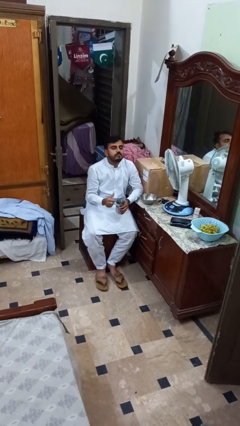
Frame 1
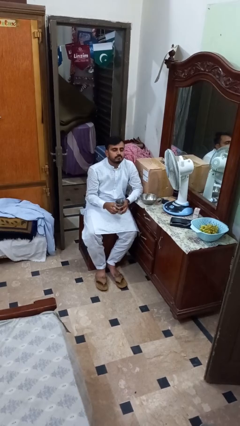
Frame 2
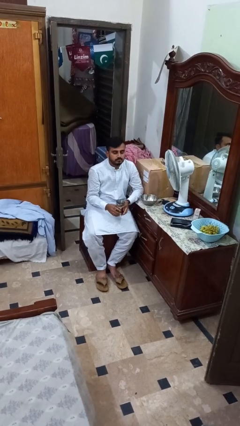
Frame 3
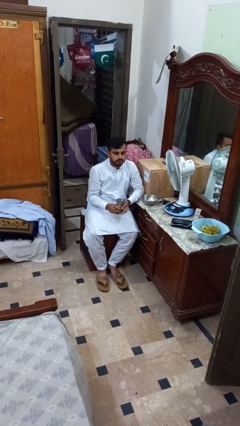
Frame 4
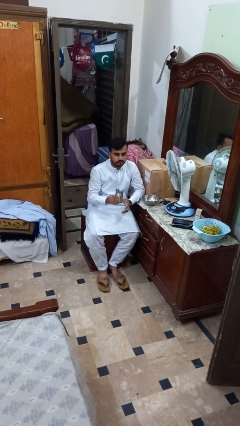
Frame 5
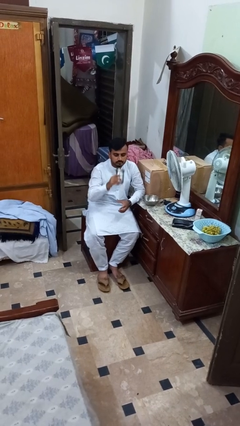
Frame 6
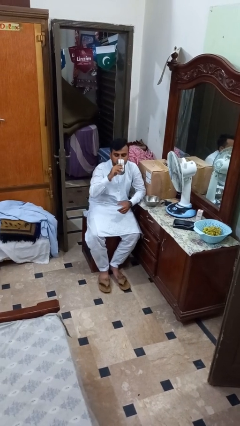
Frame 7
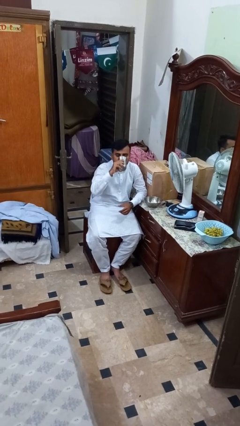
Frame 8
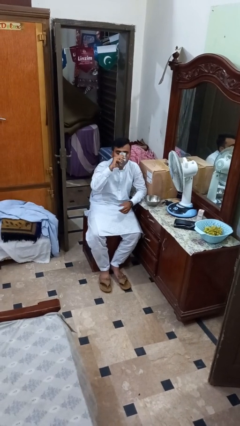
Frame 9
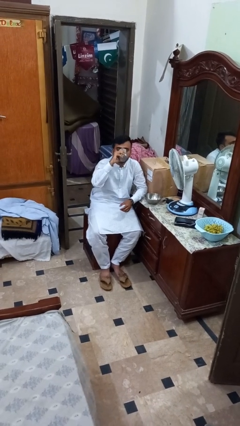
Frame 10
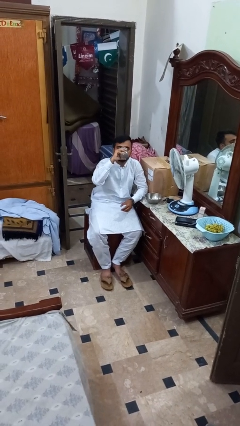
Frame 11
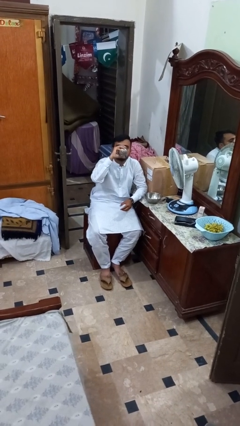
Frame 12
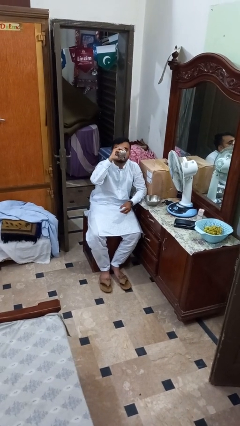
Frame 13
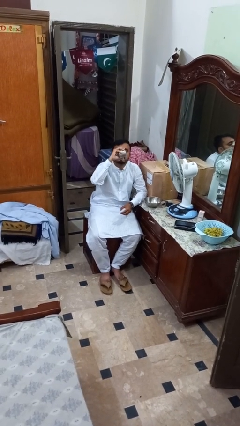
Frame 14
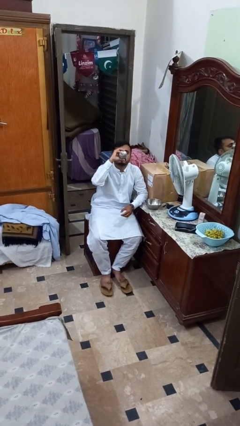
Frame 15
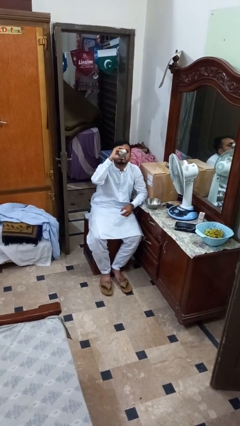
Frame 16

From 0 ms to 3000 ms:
person drinks from cup

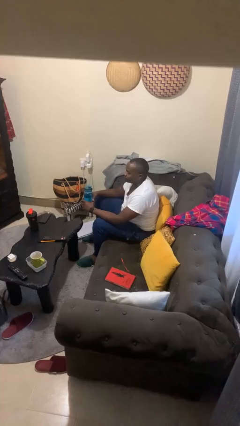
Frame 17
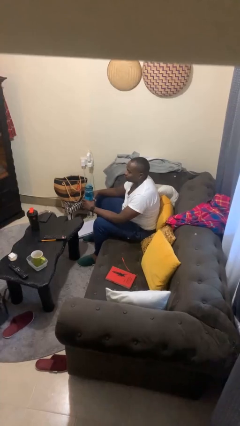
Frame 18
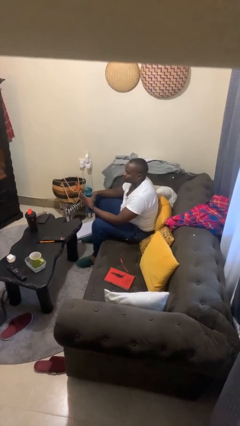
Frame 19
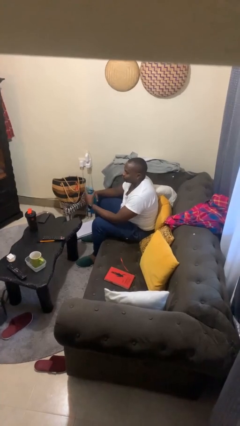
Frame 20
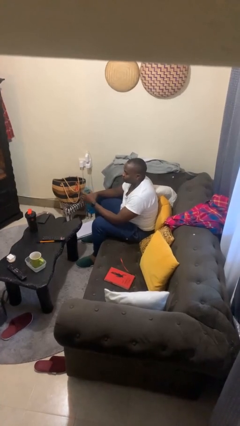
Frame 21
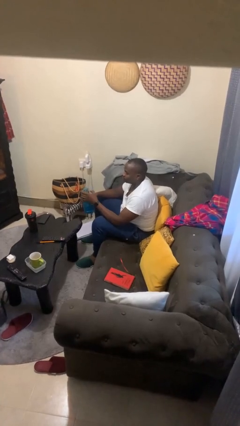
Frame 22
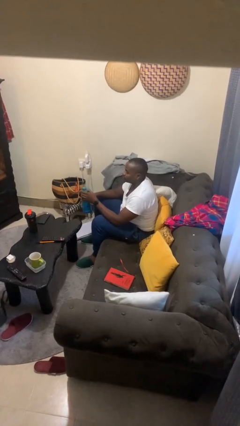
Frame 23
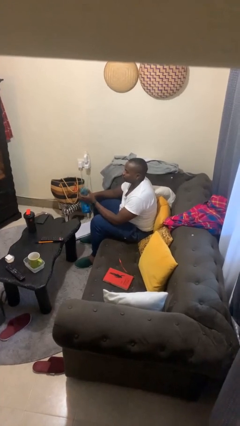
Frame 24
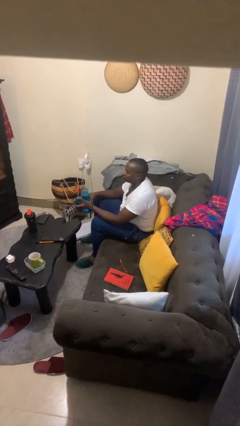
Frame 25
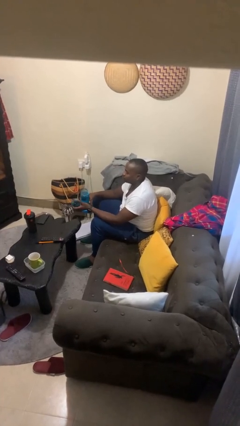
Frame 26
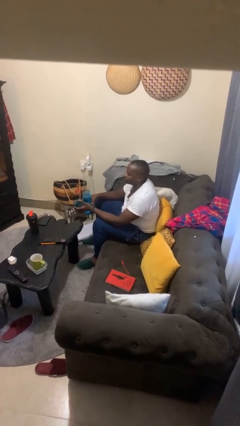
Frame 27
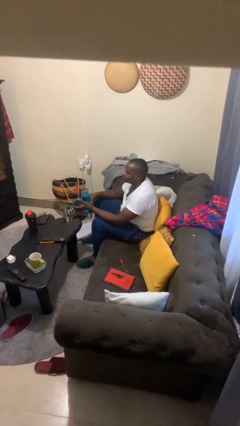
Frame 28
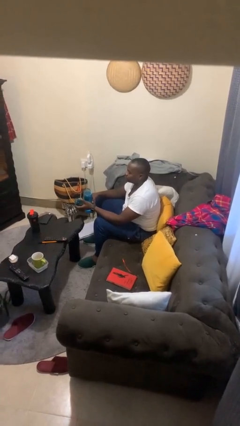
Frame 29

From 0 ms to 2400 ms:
person unscrews lid from bottle

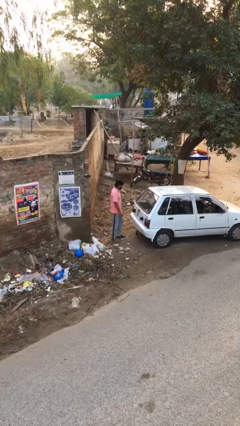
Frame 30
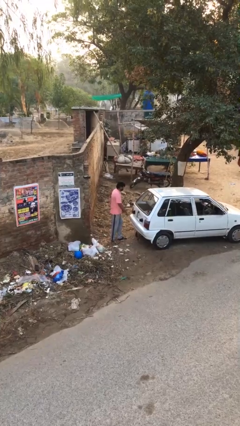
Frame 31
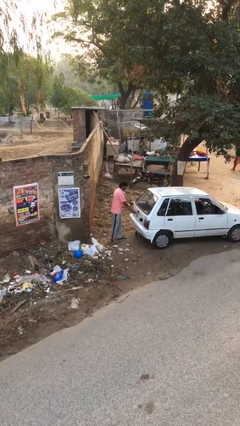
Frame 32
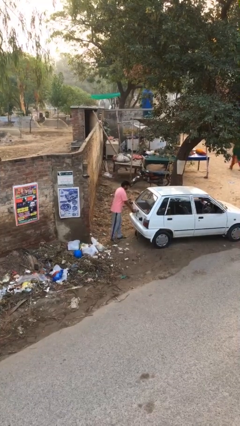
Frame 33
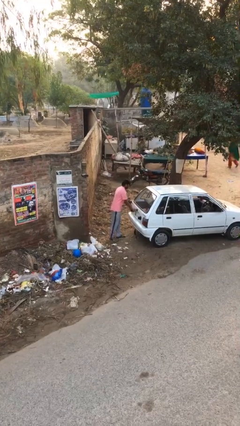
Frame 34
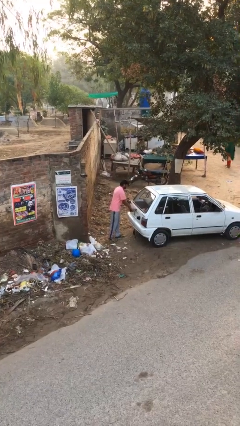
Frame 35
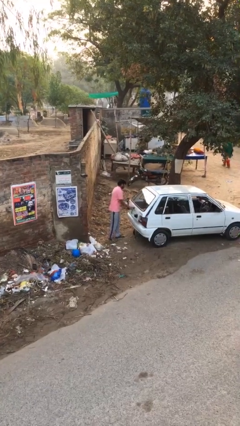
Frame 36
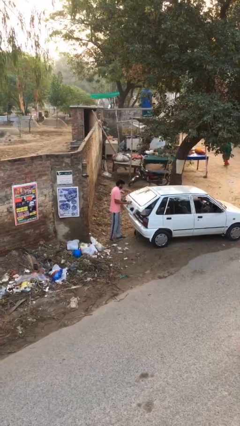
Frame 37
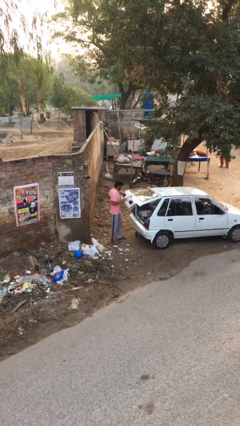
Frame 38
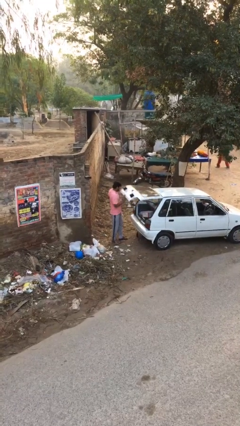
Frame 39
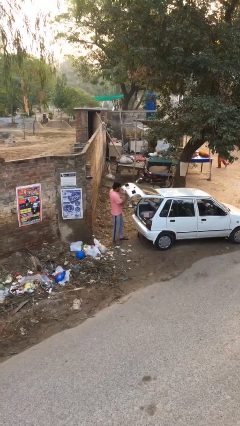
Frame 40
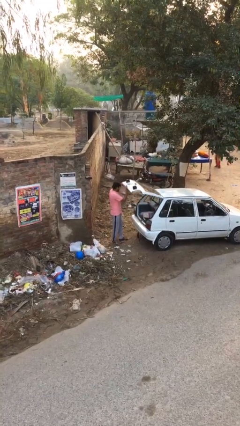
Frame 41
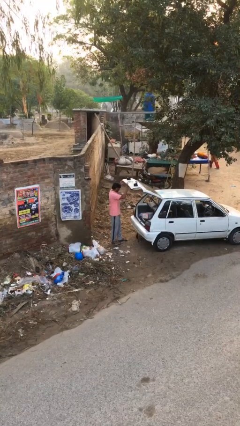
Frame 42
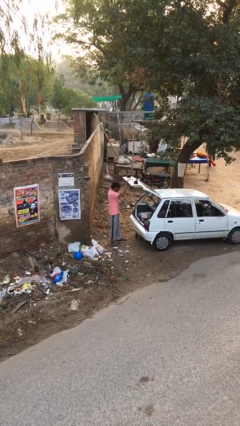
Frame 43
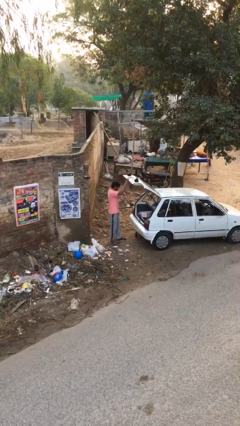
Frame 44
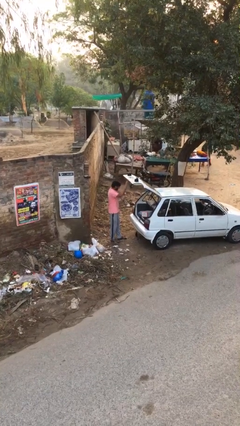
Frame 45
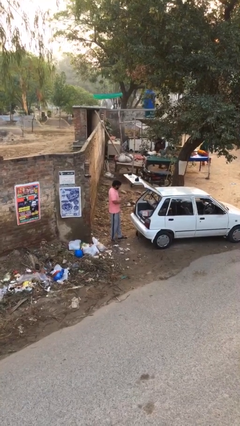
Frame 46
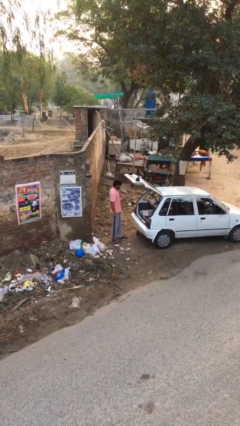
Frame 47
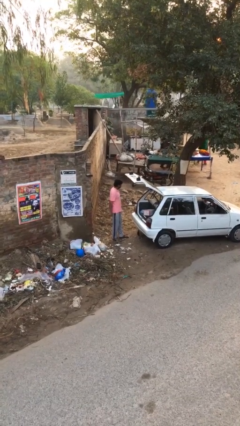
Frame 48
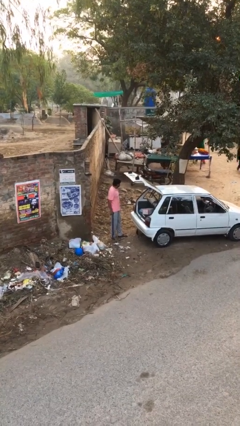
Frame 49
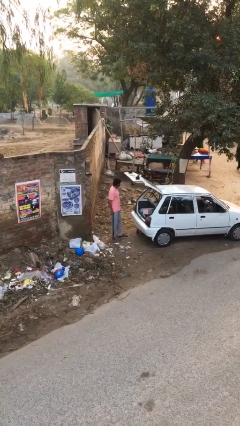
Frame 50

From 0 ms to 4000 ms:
person opens car trunk

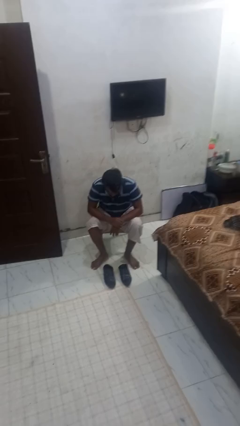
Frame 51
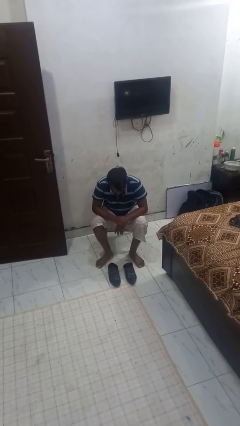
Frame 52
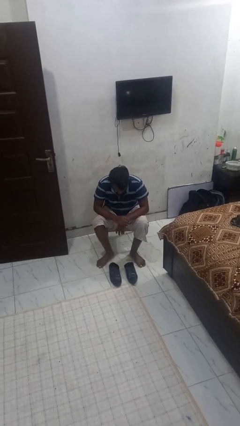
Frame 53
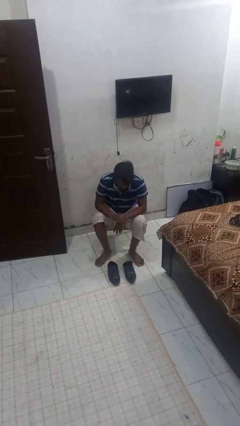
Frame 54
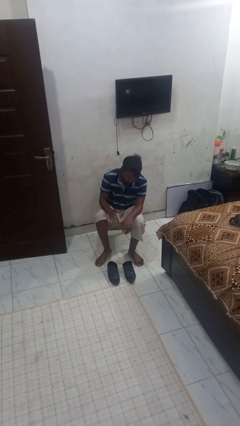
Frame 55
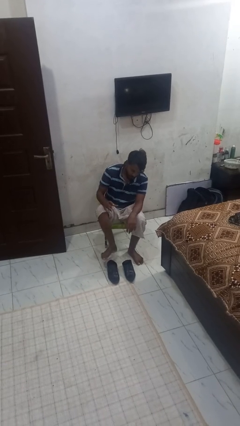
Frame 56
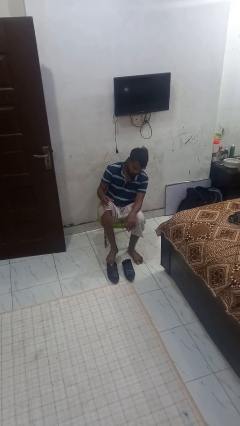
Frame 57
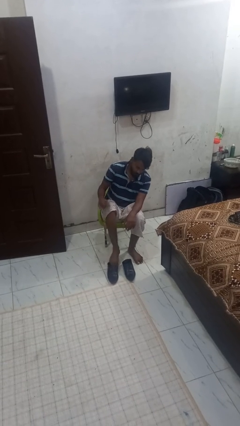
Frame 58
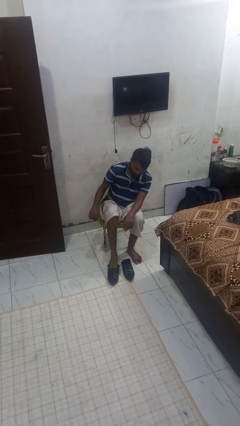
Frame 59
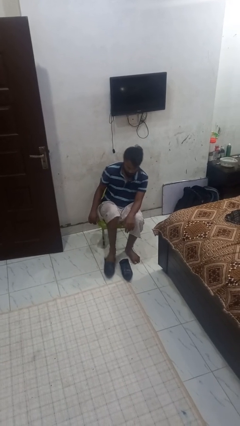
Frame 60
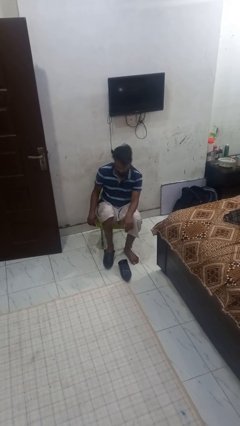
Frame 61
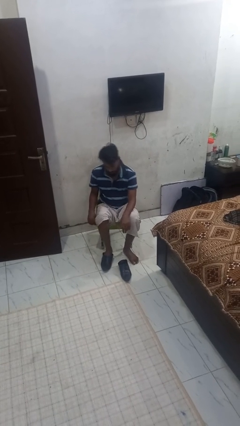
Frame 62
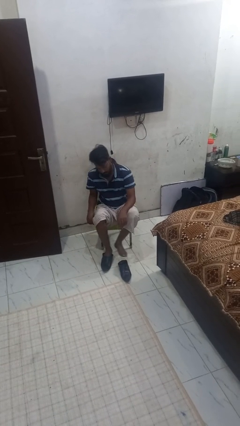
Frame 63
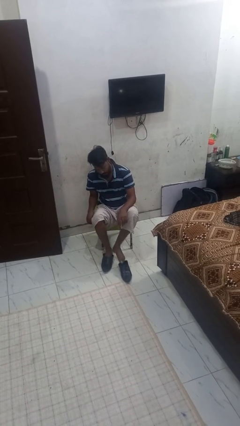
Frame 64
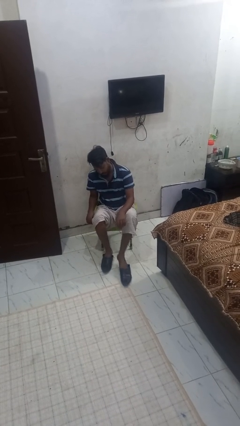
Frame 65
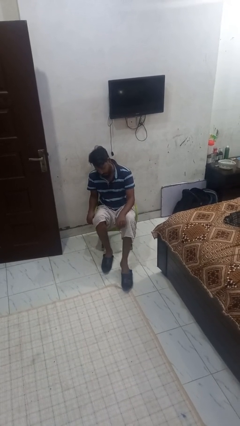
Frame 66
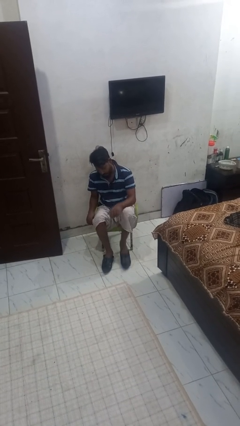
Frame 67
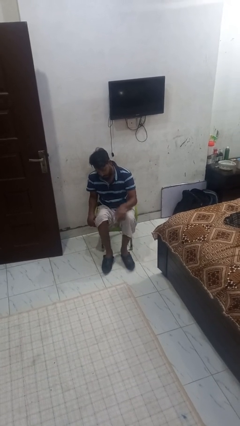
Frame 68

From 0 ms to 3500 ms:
person puts on shoes

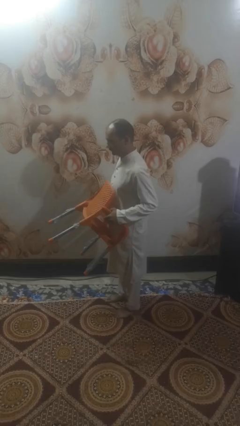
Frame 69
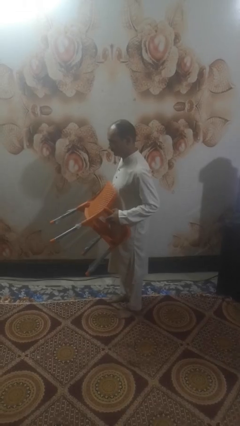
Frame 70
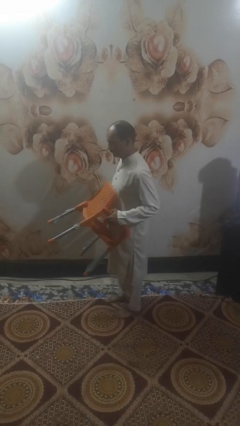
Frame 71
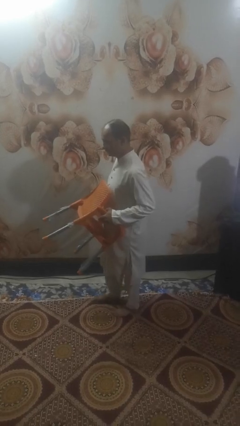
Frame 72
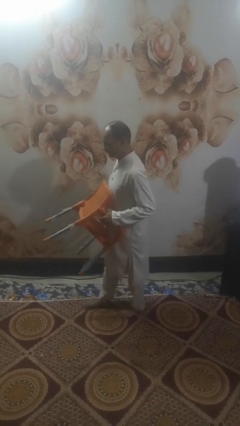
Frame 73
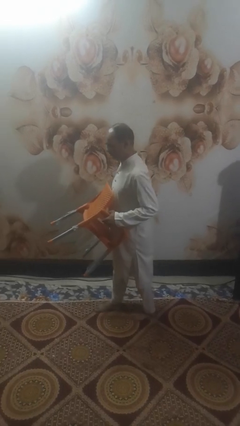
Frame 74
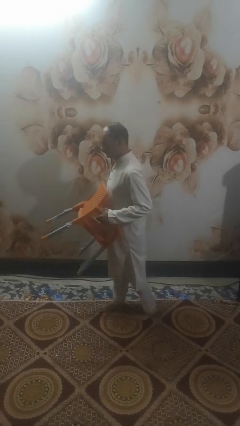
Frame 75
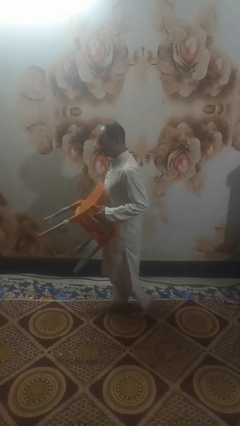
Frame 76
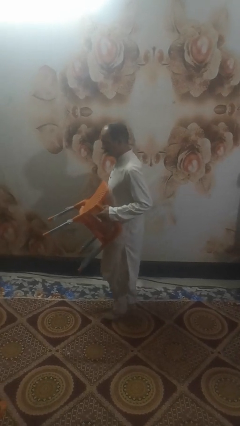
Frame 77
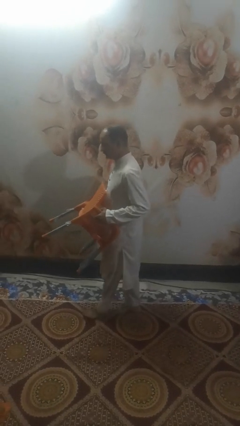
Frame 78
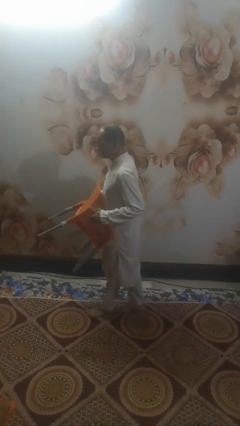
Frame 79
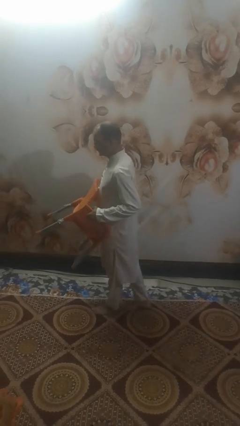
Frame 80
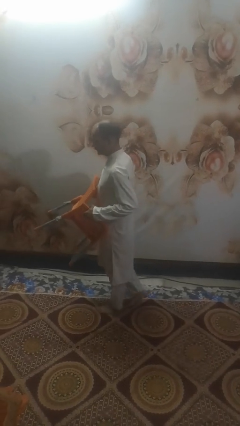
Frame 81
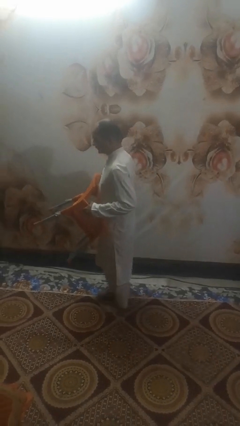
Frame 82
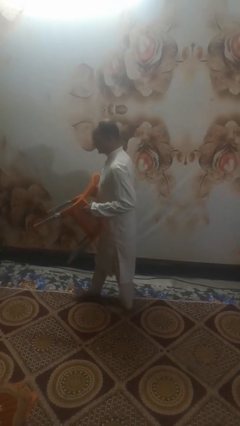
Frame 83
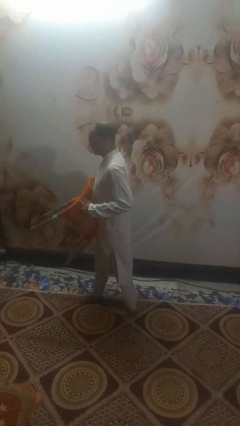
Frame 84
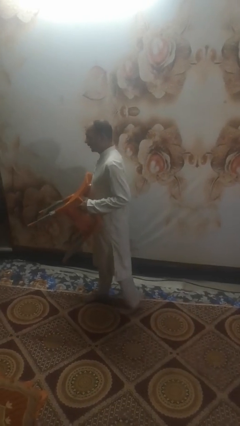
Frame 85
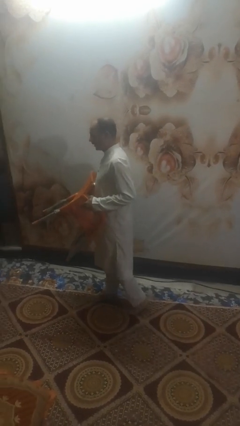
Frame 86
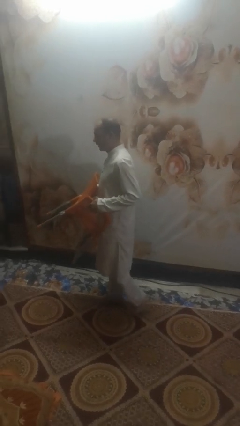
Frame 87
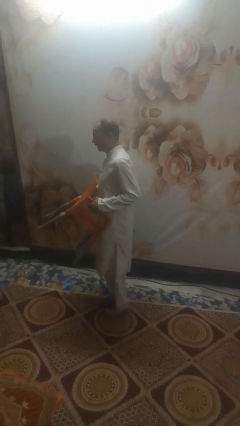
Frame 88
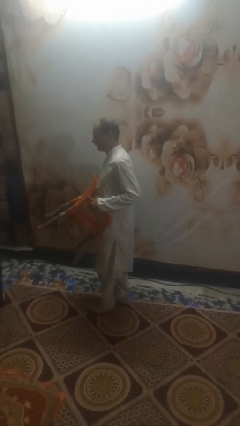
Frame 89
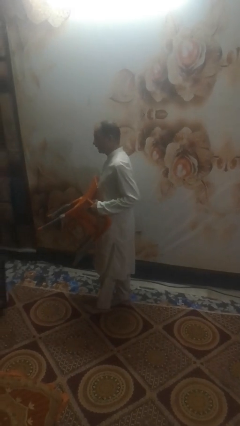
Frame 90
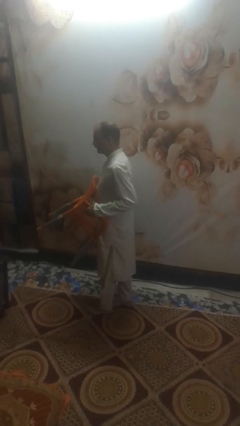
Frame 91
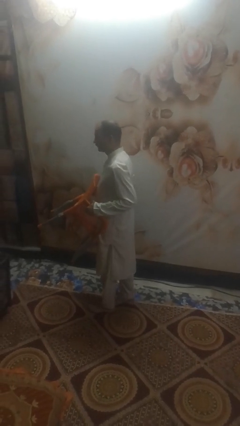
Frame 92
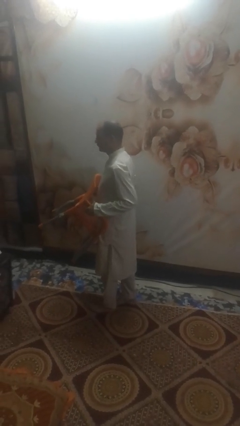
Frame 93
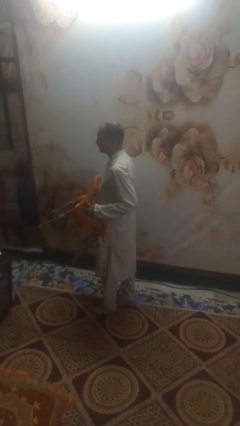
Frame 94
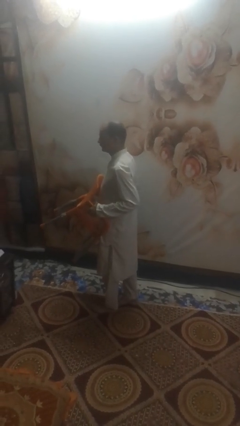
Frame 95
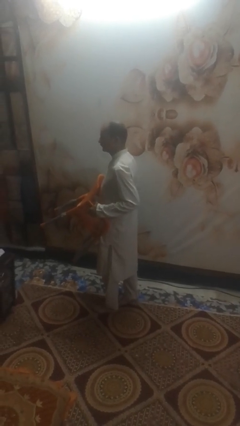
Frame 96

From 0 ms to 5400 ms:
person carries furniture
